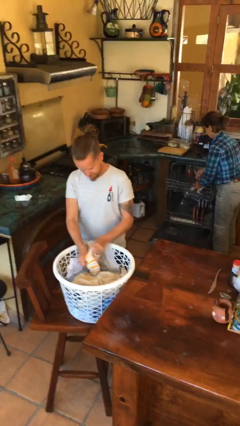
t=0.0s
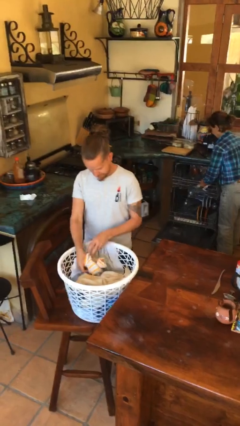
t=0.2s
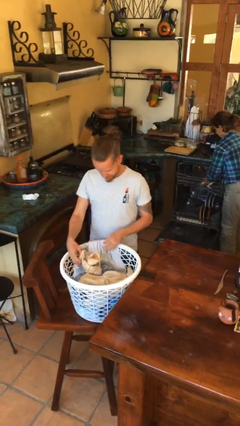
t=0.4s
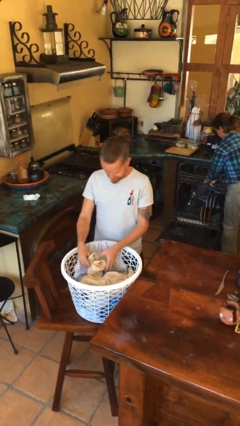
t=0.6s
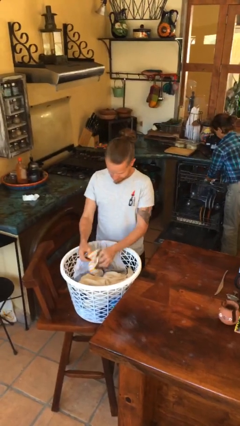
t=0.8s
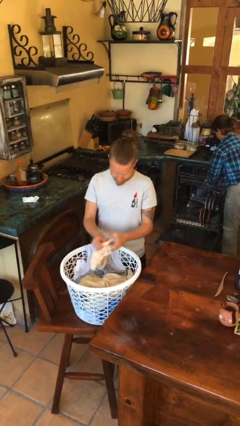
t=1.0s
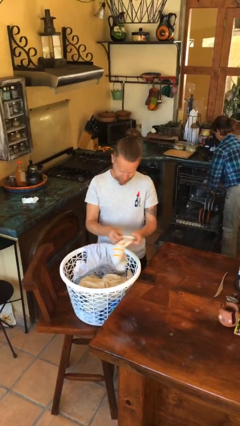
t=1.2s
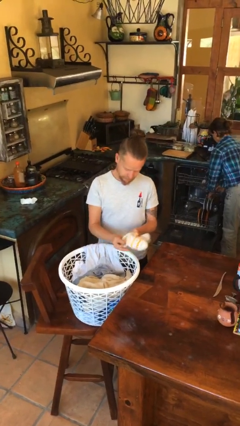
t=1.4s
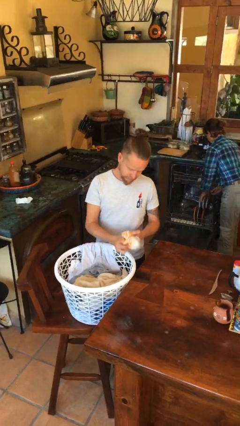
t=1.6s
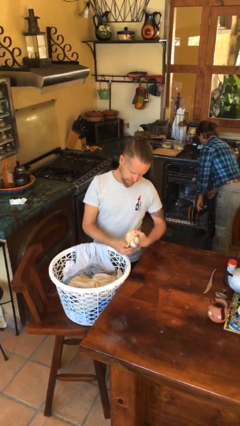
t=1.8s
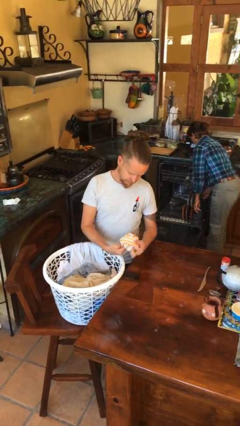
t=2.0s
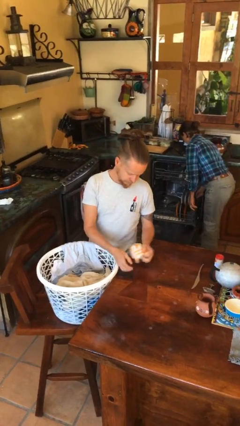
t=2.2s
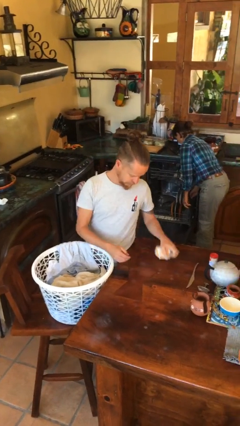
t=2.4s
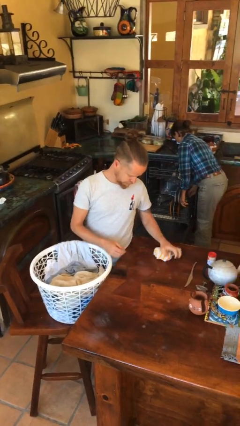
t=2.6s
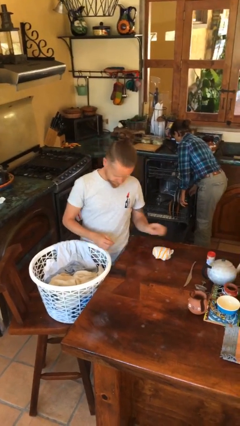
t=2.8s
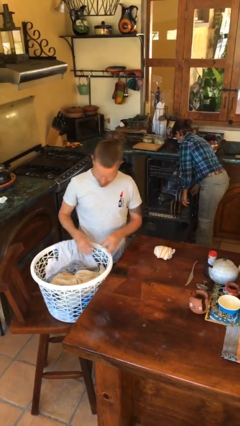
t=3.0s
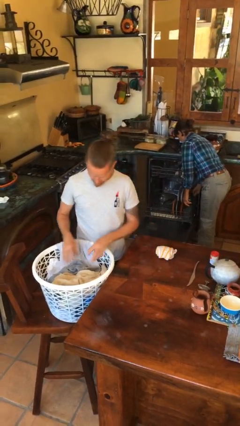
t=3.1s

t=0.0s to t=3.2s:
person folds socks

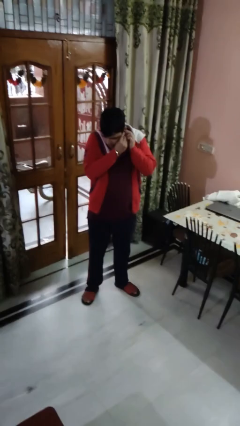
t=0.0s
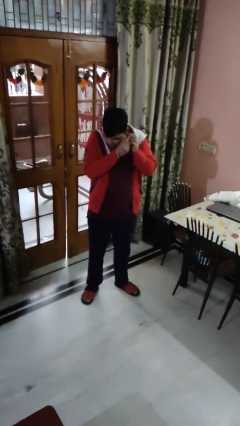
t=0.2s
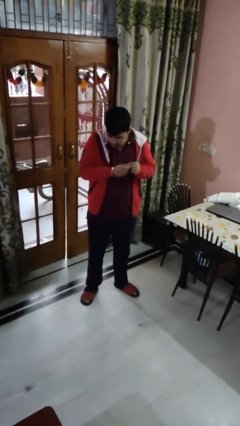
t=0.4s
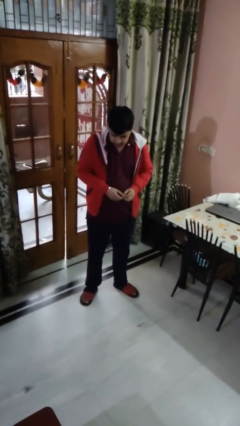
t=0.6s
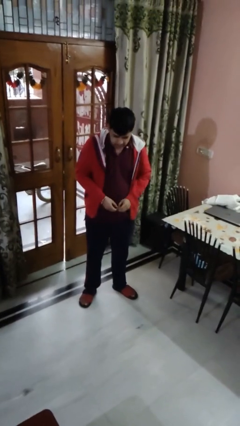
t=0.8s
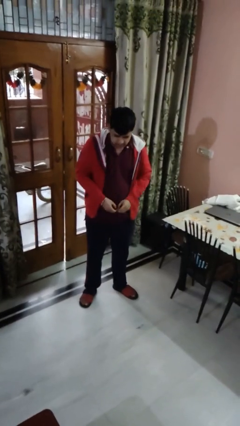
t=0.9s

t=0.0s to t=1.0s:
person takes off earrings

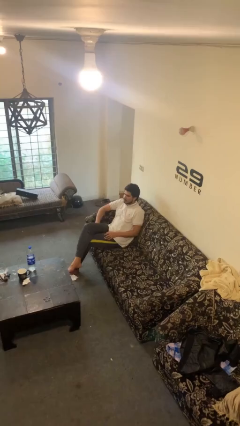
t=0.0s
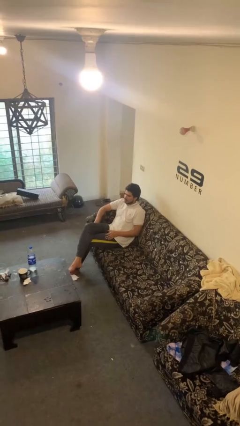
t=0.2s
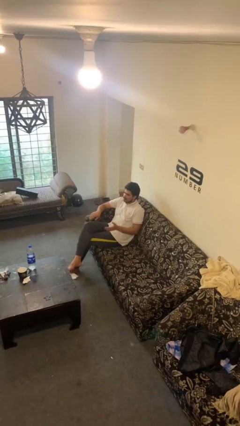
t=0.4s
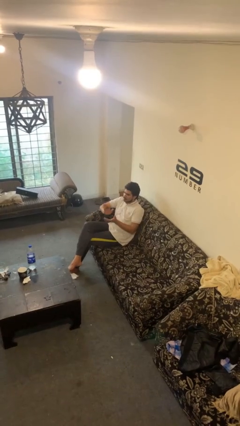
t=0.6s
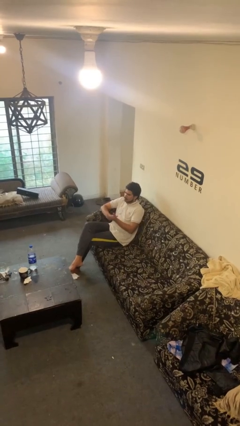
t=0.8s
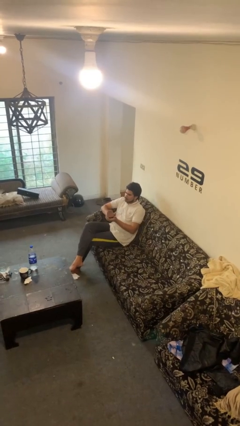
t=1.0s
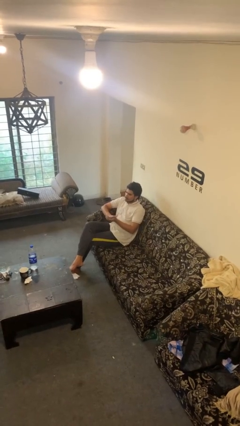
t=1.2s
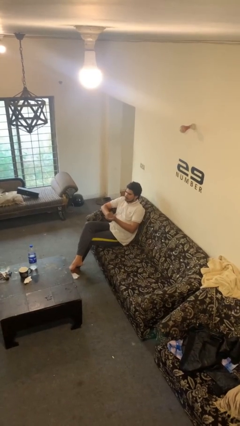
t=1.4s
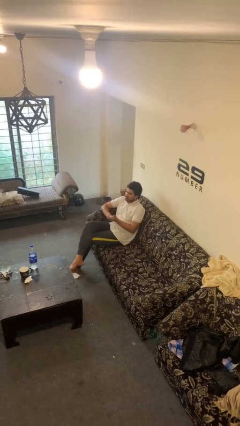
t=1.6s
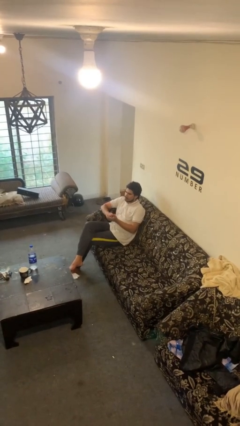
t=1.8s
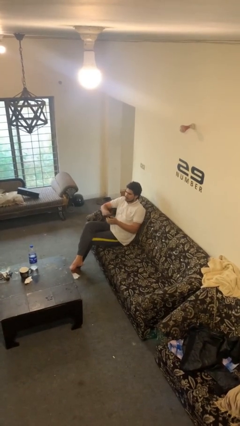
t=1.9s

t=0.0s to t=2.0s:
person claps hands

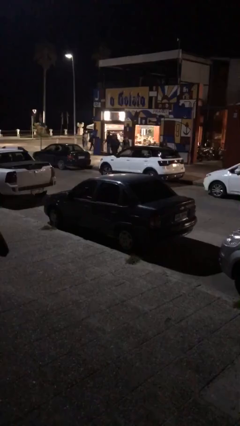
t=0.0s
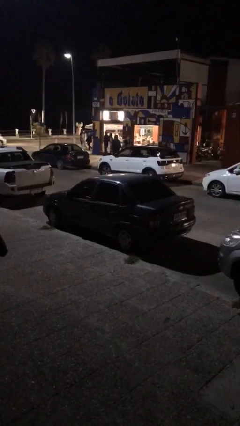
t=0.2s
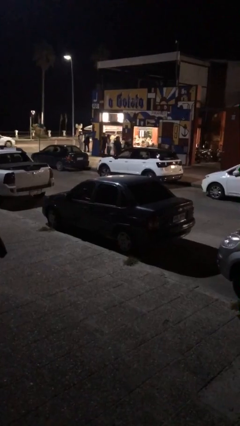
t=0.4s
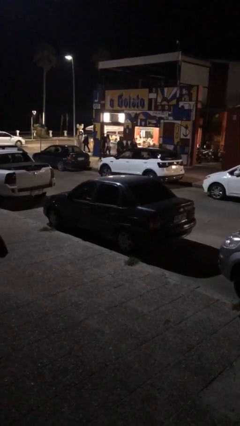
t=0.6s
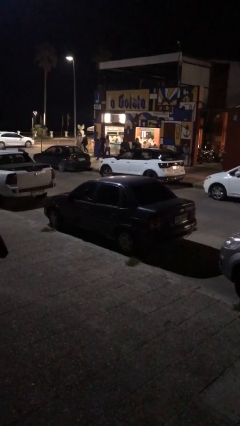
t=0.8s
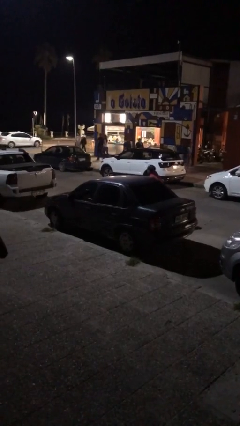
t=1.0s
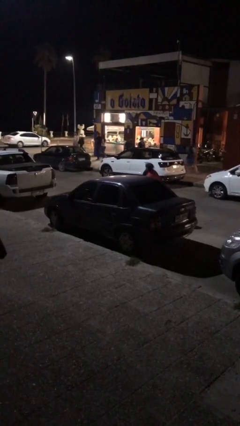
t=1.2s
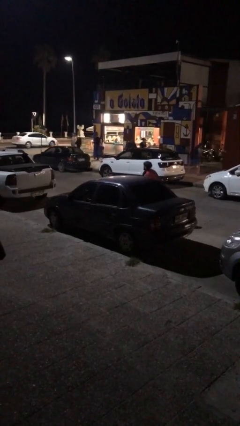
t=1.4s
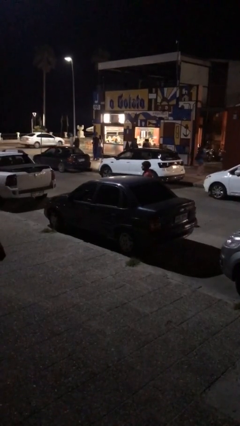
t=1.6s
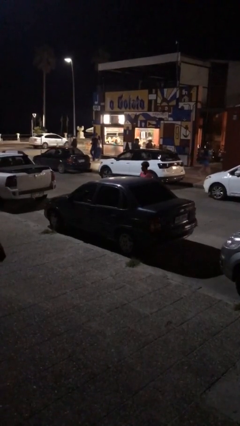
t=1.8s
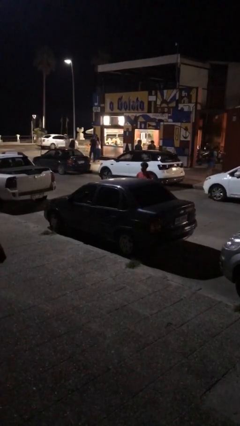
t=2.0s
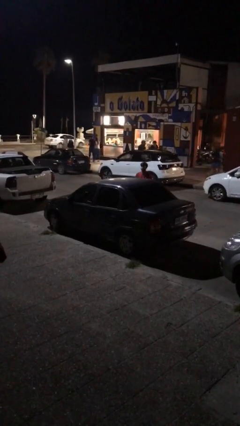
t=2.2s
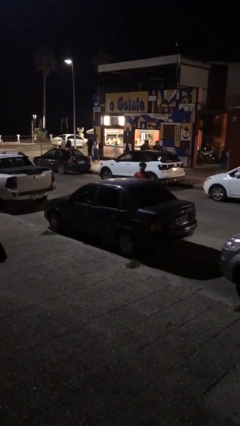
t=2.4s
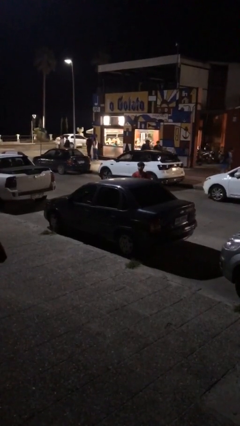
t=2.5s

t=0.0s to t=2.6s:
car drops off person

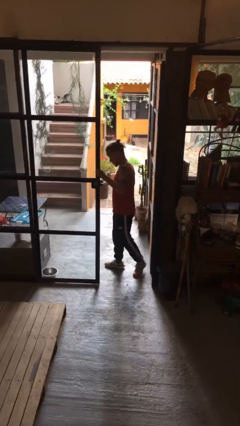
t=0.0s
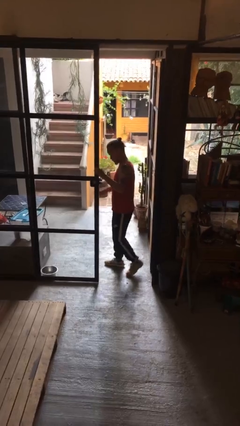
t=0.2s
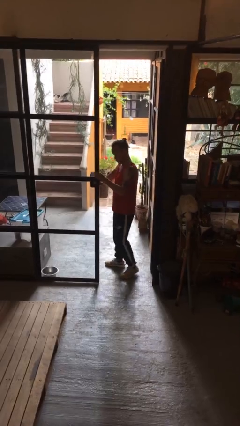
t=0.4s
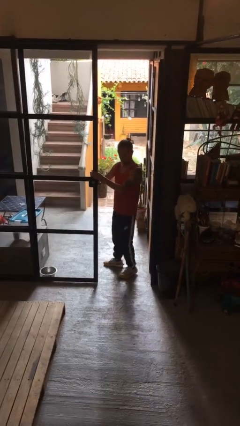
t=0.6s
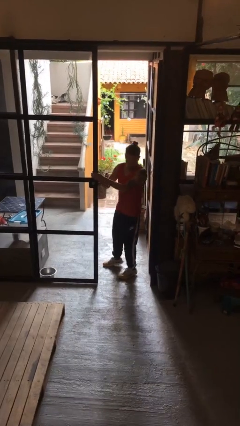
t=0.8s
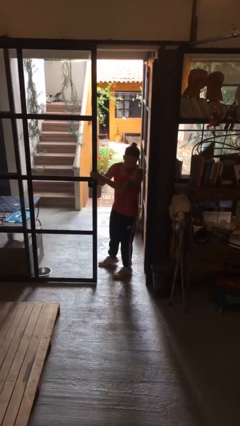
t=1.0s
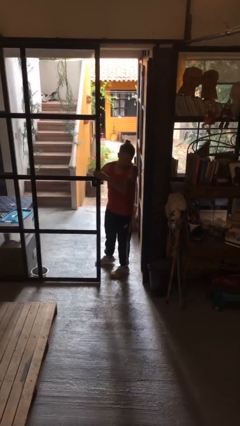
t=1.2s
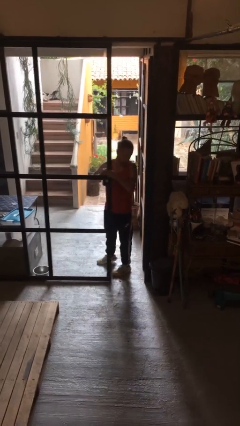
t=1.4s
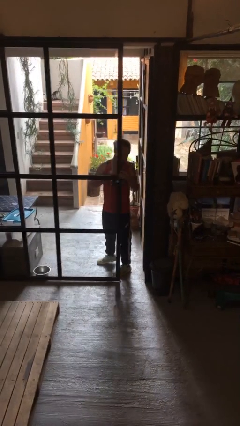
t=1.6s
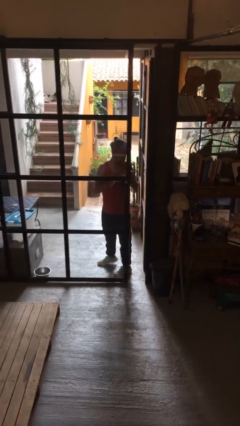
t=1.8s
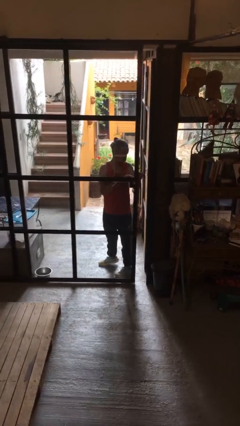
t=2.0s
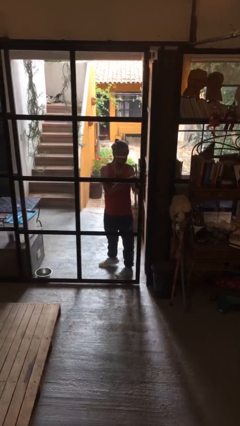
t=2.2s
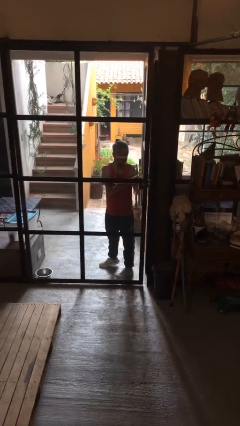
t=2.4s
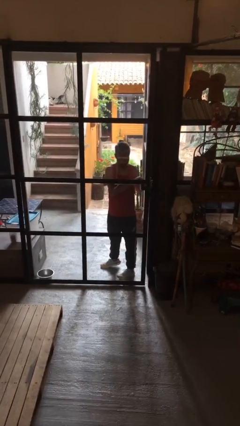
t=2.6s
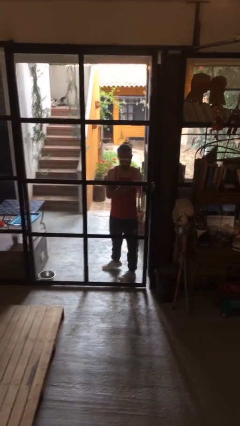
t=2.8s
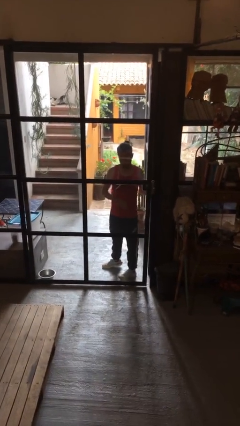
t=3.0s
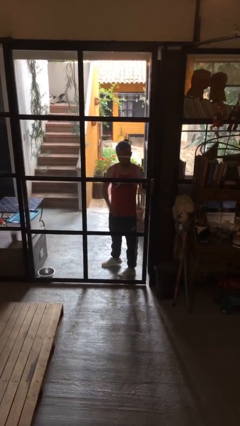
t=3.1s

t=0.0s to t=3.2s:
person closes sliding door

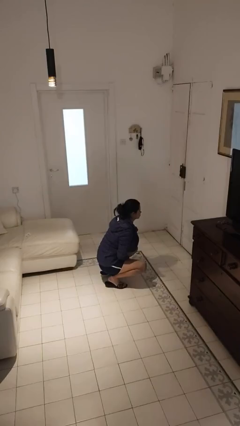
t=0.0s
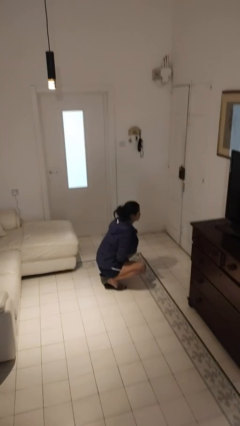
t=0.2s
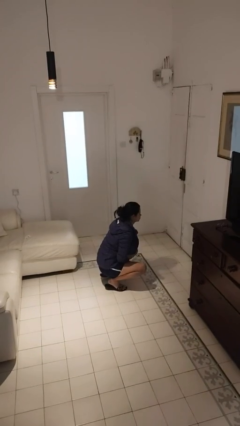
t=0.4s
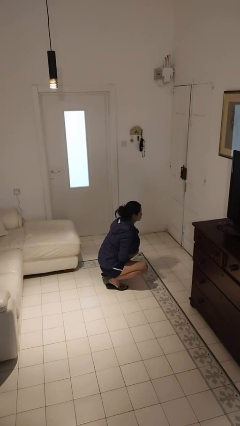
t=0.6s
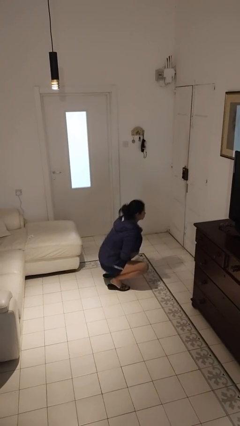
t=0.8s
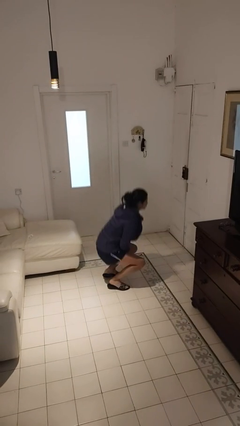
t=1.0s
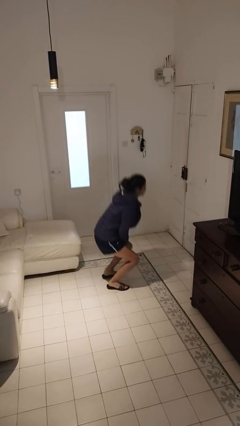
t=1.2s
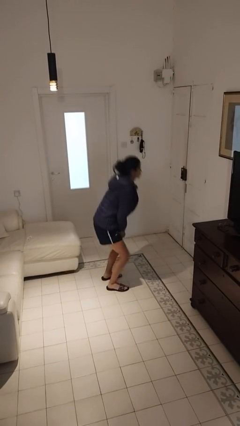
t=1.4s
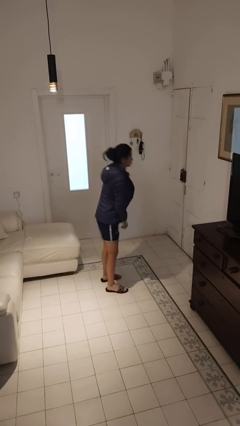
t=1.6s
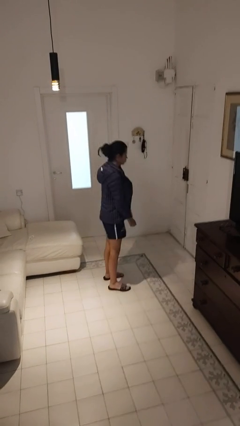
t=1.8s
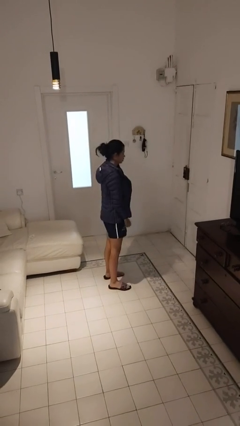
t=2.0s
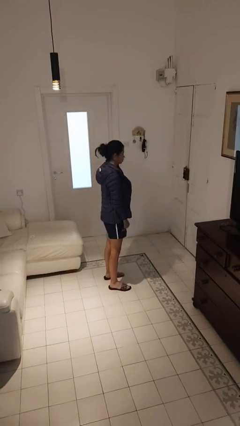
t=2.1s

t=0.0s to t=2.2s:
person stands up

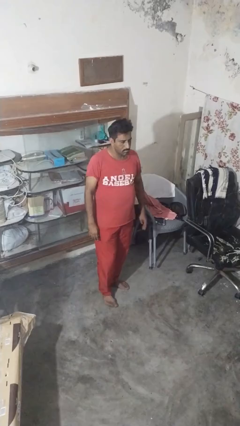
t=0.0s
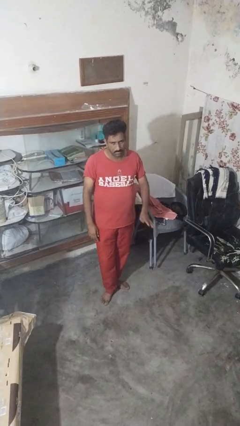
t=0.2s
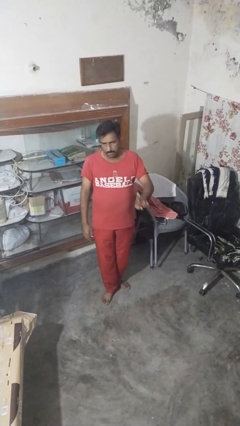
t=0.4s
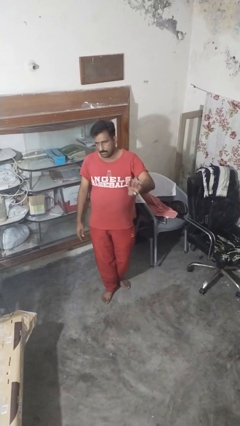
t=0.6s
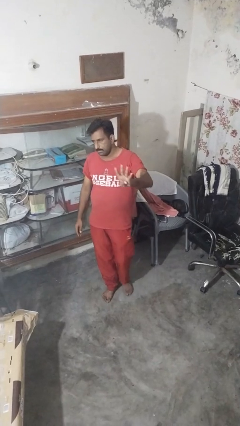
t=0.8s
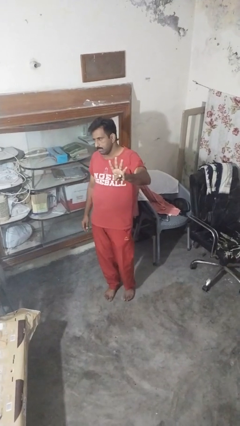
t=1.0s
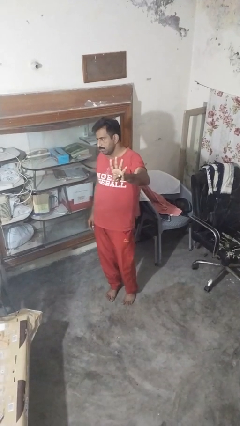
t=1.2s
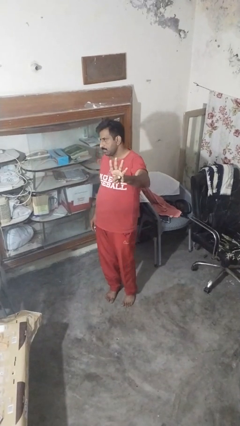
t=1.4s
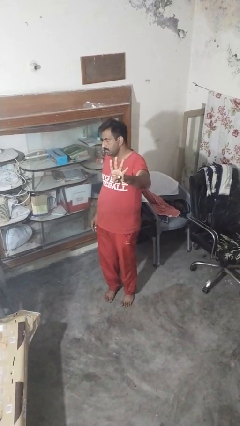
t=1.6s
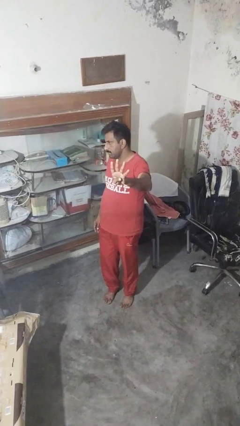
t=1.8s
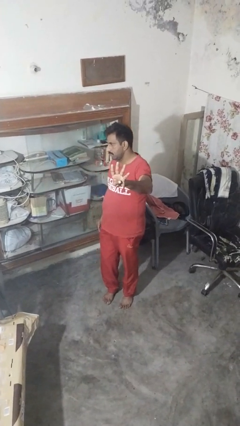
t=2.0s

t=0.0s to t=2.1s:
person gestures number four

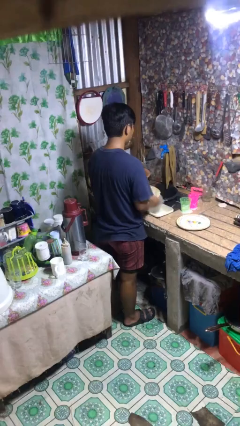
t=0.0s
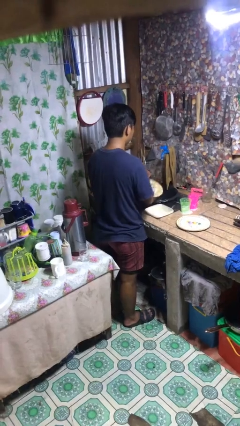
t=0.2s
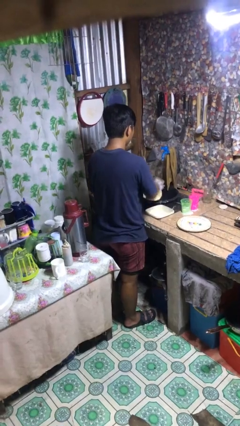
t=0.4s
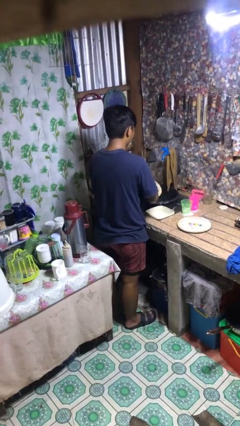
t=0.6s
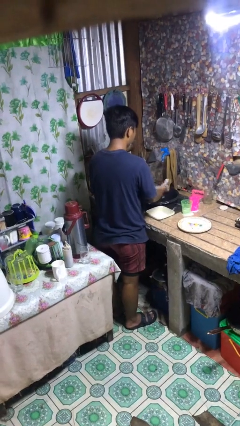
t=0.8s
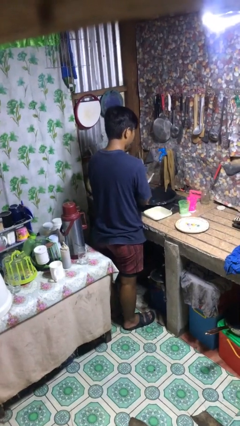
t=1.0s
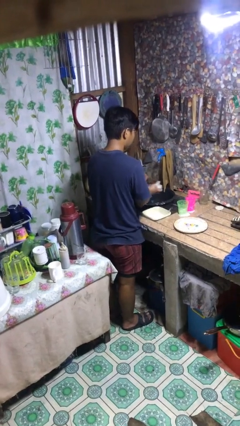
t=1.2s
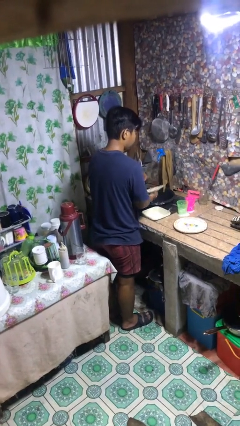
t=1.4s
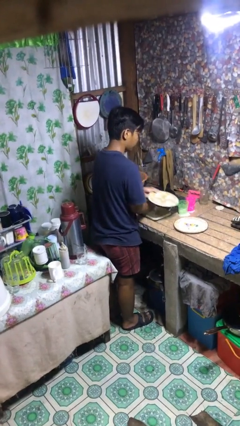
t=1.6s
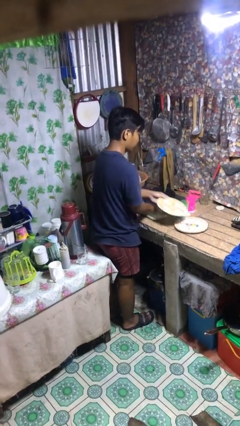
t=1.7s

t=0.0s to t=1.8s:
person washes dish
